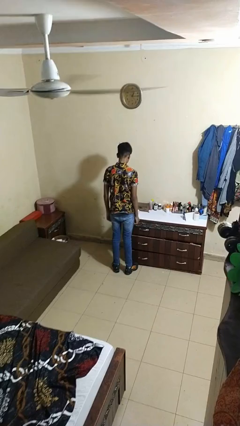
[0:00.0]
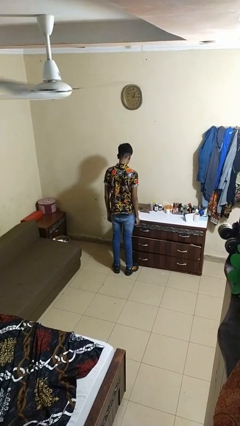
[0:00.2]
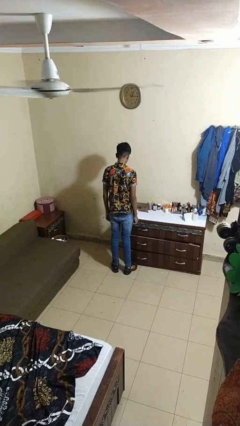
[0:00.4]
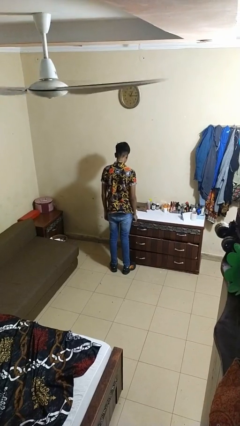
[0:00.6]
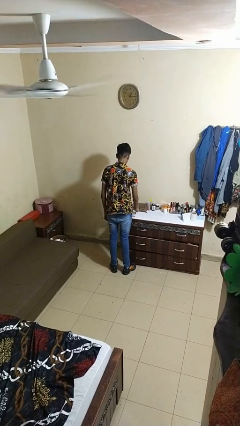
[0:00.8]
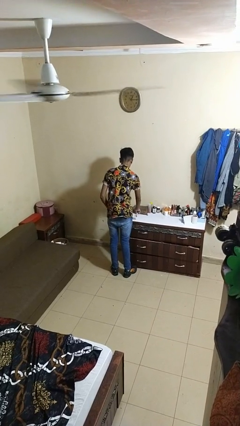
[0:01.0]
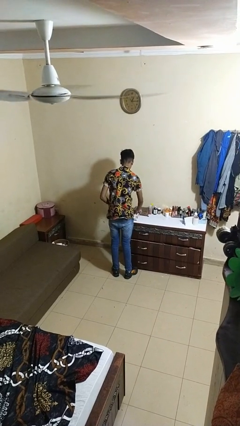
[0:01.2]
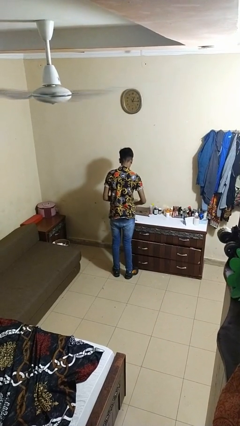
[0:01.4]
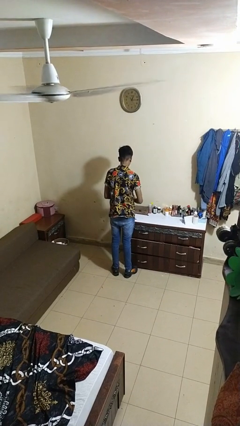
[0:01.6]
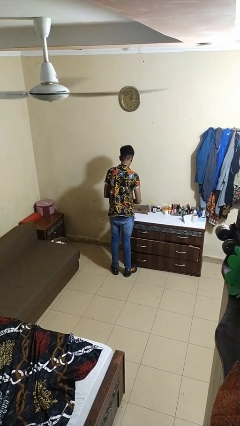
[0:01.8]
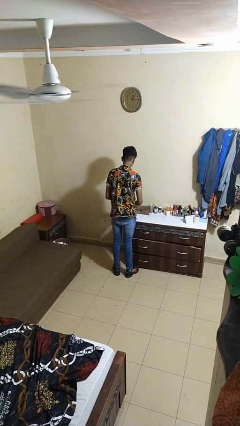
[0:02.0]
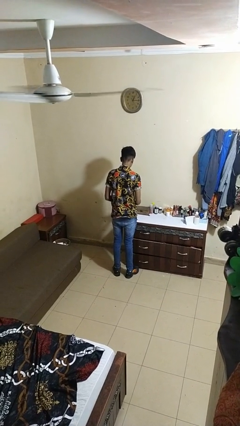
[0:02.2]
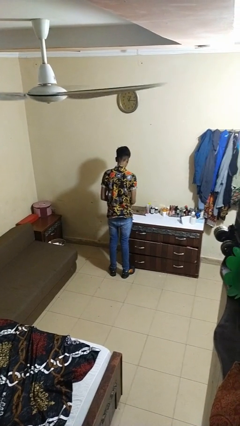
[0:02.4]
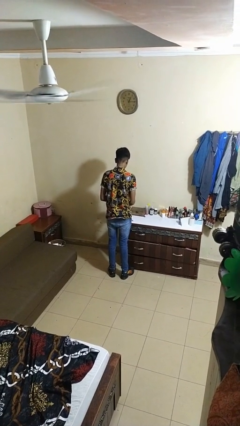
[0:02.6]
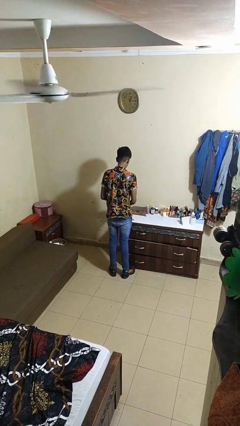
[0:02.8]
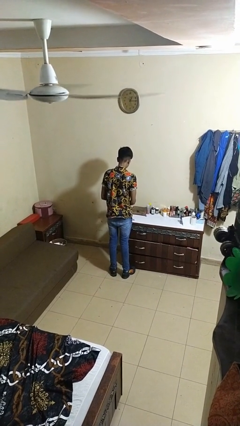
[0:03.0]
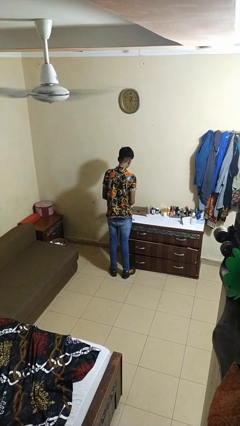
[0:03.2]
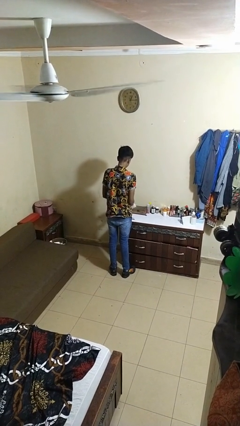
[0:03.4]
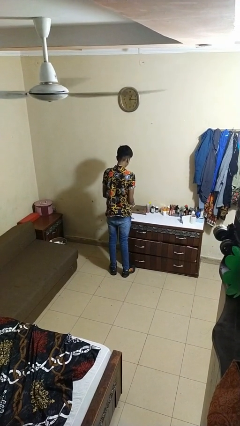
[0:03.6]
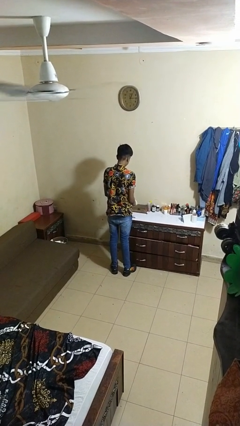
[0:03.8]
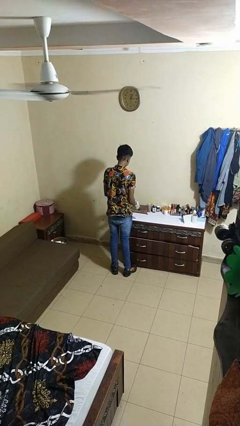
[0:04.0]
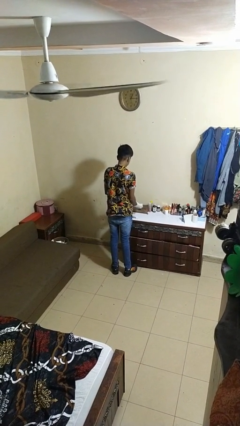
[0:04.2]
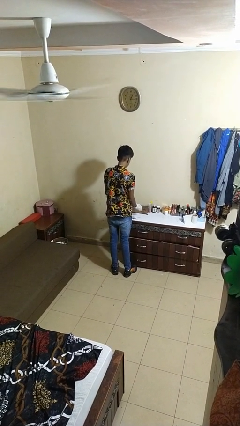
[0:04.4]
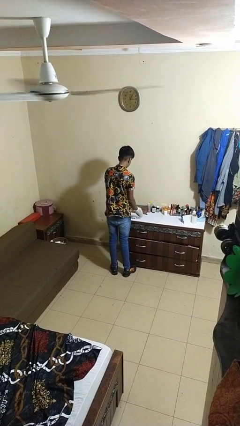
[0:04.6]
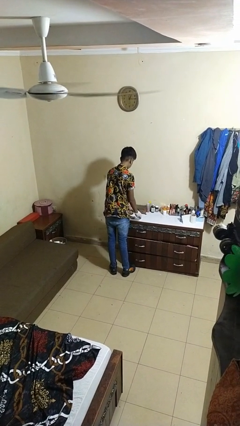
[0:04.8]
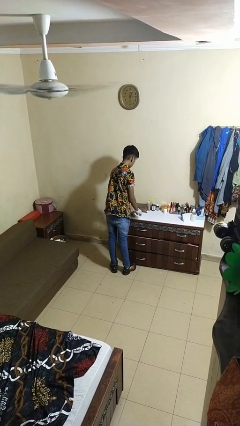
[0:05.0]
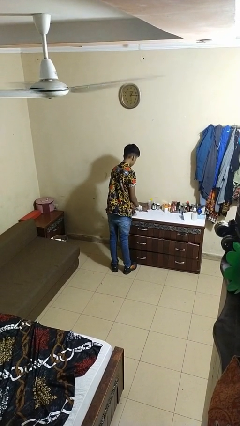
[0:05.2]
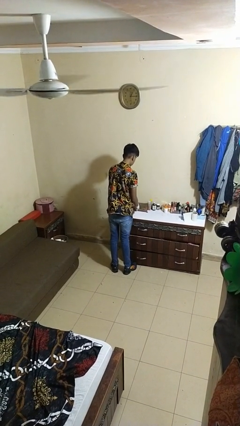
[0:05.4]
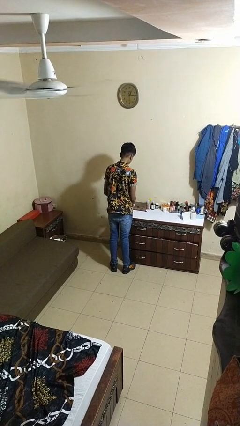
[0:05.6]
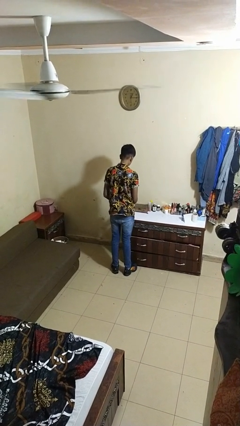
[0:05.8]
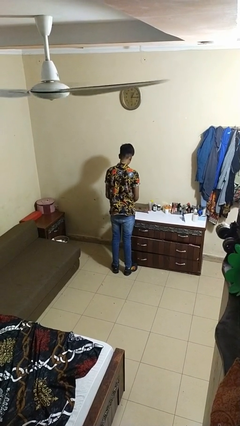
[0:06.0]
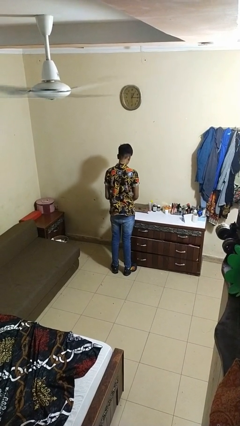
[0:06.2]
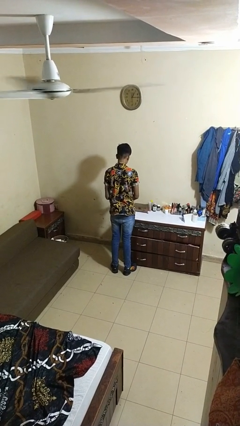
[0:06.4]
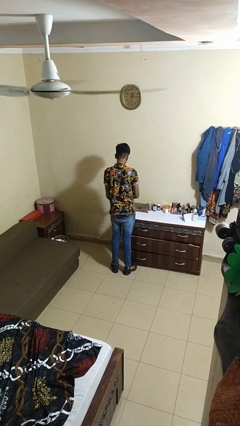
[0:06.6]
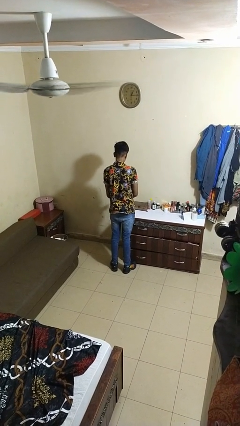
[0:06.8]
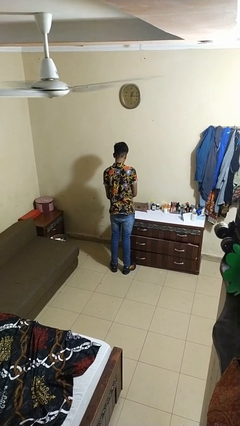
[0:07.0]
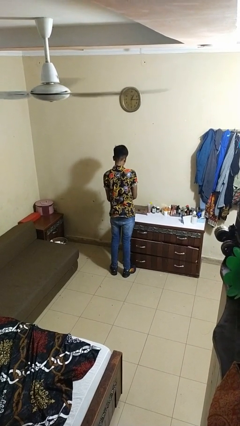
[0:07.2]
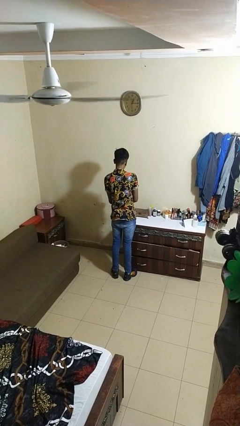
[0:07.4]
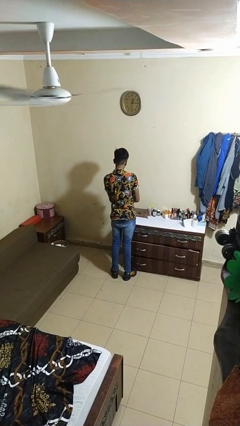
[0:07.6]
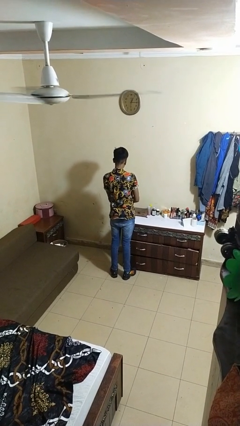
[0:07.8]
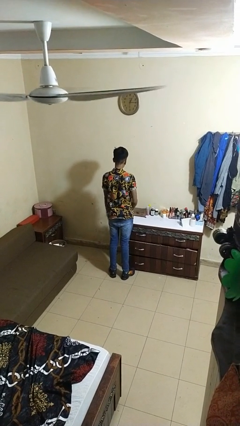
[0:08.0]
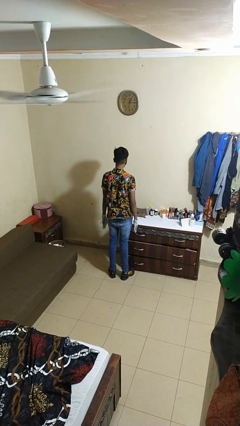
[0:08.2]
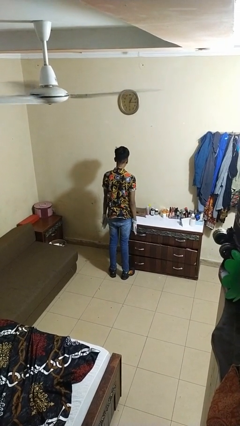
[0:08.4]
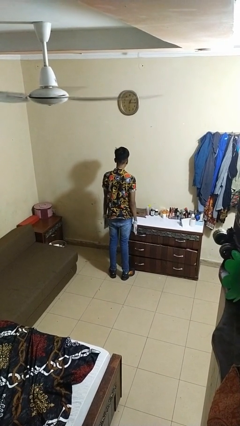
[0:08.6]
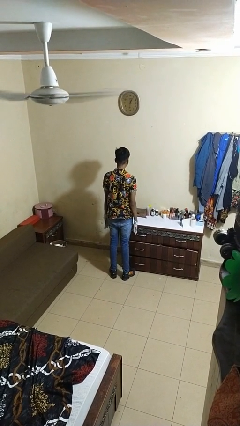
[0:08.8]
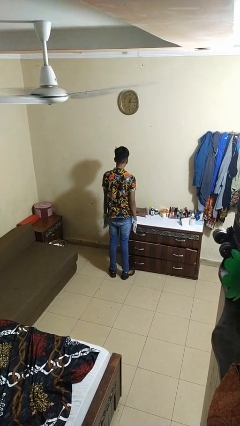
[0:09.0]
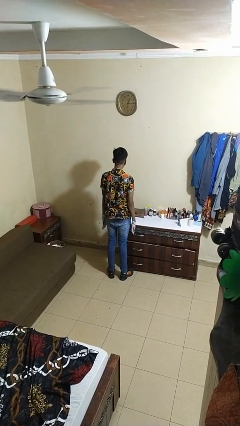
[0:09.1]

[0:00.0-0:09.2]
person puts on gloves

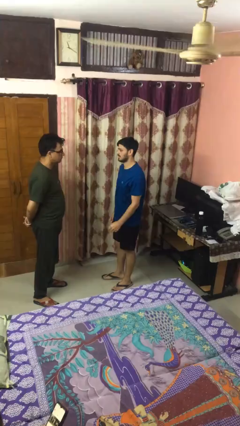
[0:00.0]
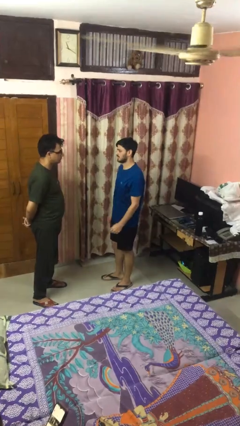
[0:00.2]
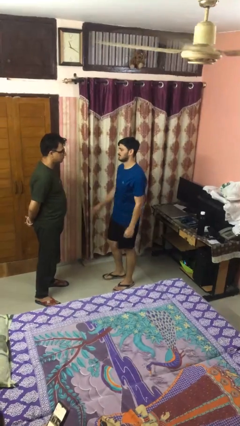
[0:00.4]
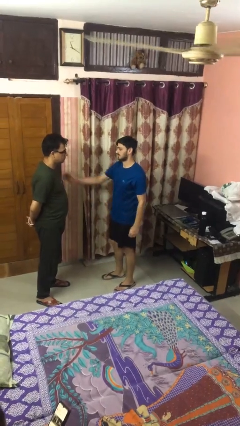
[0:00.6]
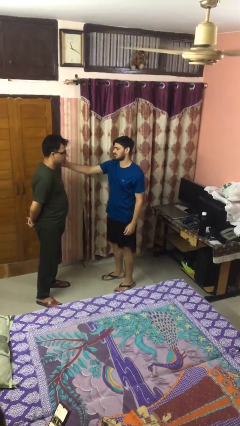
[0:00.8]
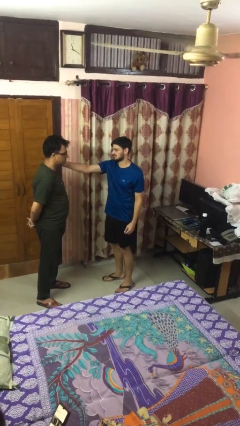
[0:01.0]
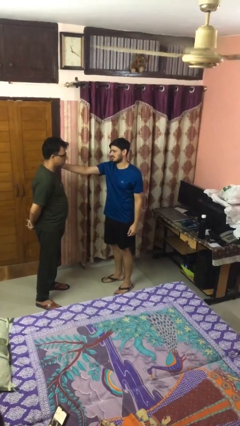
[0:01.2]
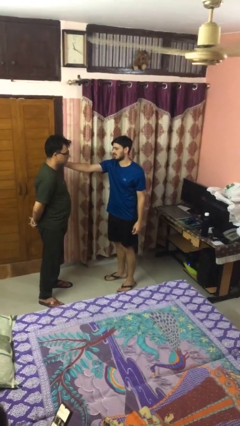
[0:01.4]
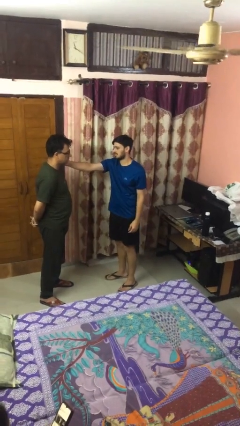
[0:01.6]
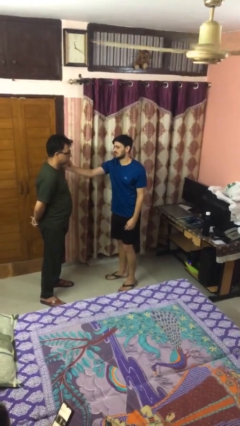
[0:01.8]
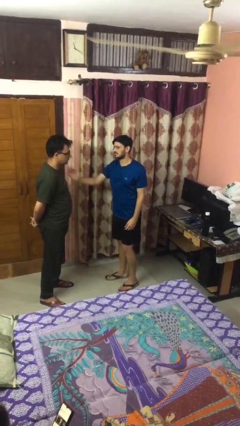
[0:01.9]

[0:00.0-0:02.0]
person touches face of person

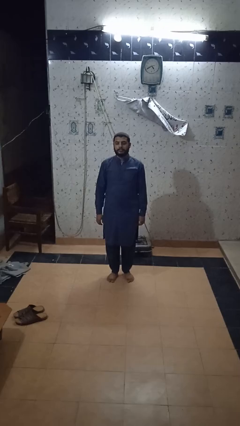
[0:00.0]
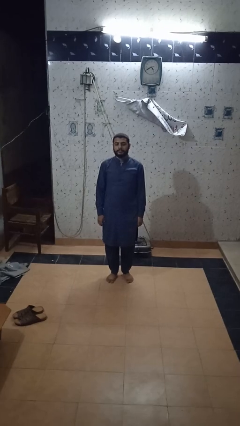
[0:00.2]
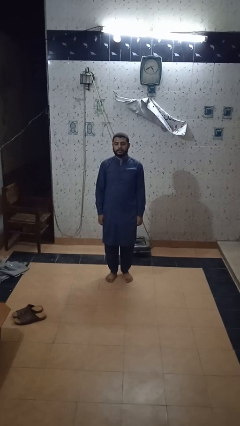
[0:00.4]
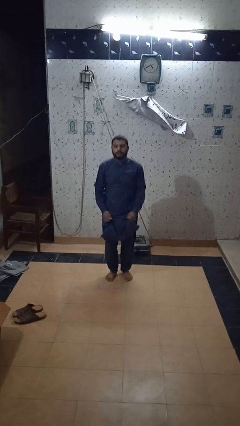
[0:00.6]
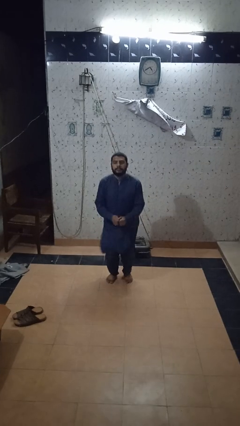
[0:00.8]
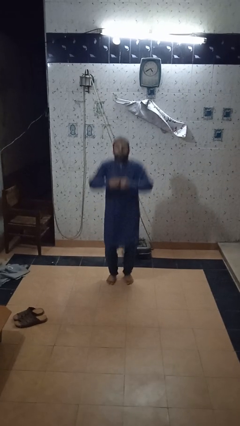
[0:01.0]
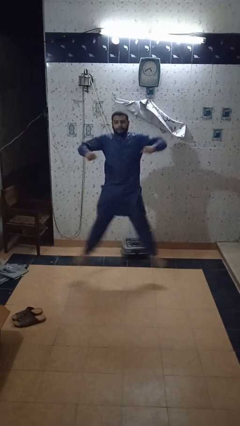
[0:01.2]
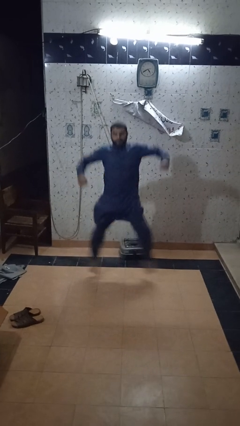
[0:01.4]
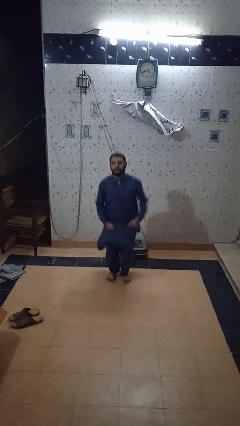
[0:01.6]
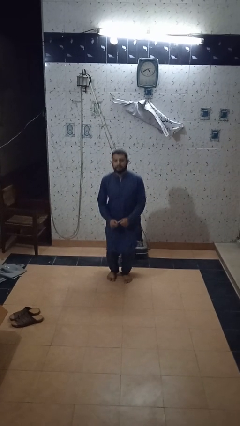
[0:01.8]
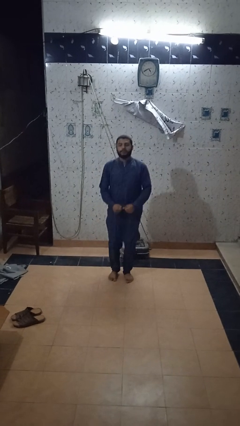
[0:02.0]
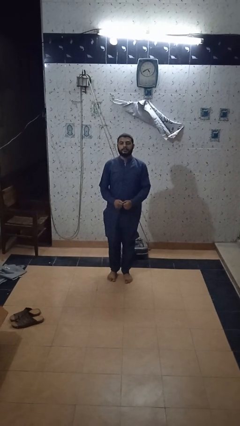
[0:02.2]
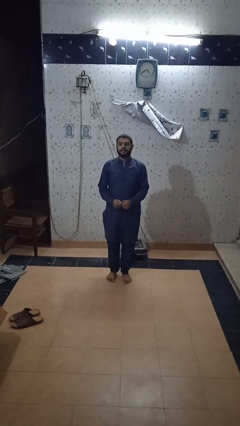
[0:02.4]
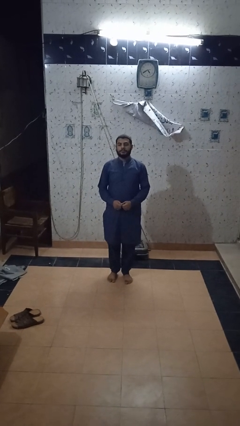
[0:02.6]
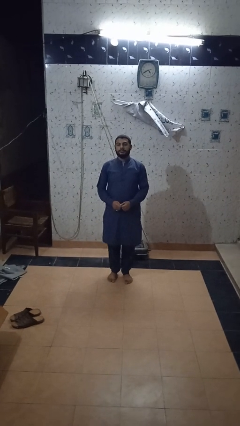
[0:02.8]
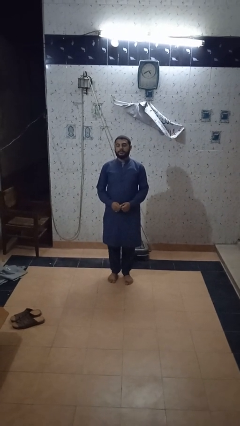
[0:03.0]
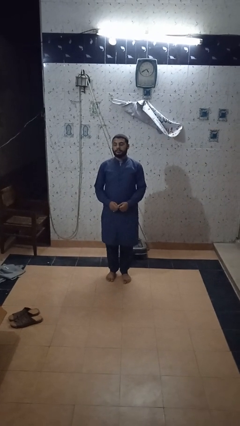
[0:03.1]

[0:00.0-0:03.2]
person exercises with jumping jacks

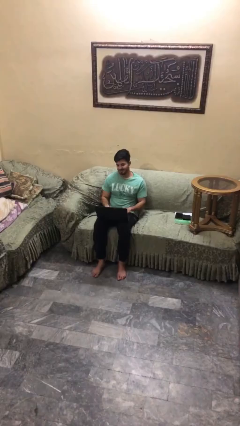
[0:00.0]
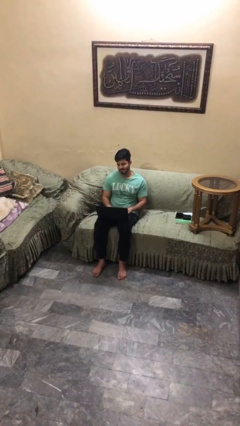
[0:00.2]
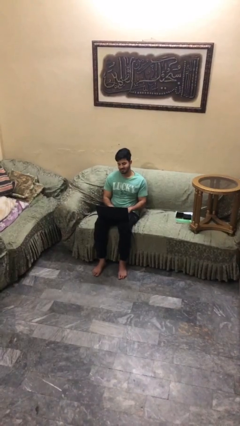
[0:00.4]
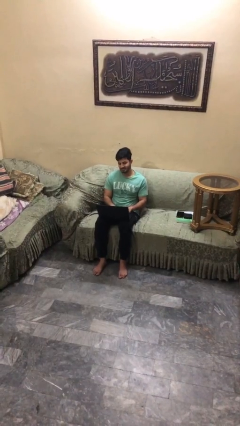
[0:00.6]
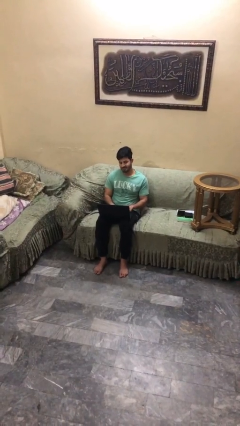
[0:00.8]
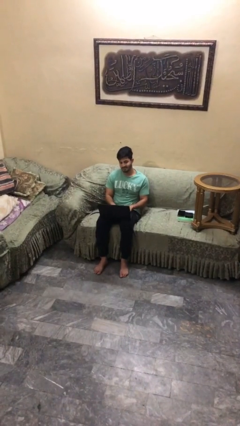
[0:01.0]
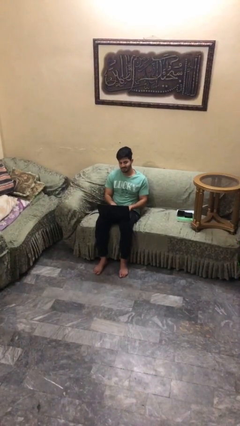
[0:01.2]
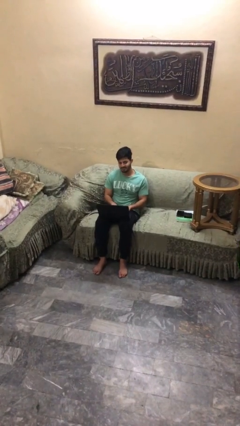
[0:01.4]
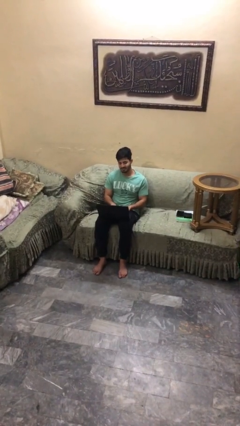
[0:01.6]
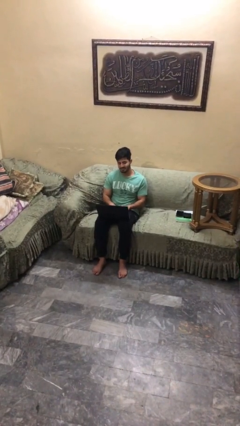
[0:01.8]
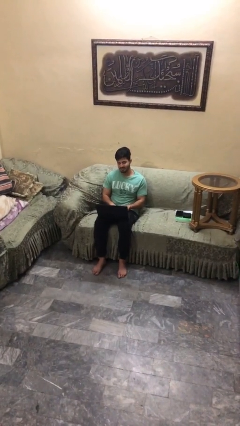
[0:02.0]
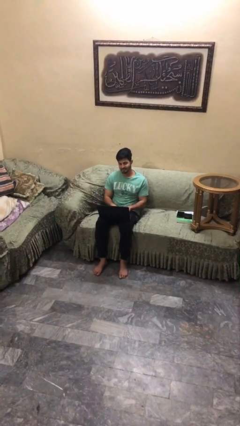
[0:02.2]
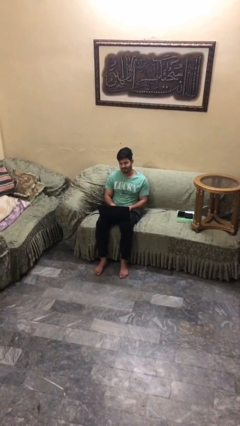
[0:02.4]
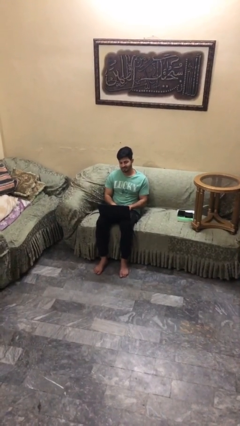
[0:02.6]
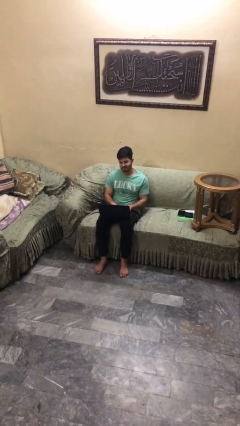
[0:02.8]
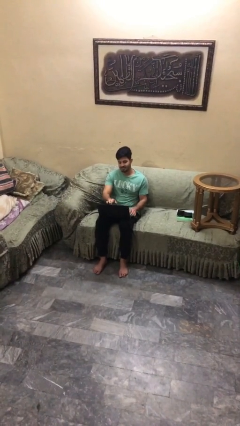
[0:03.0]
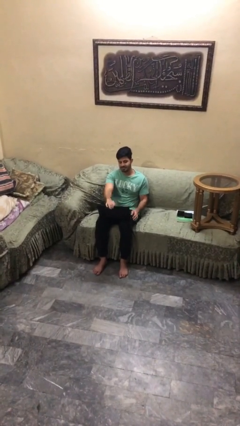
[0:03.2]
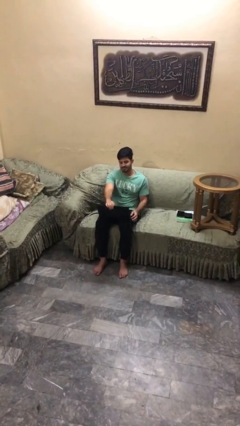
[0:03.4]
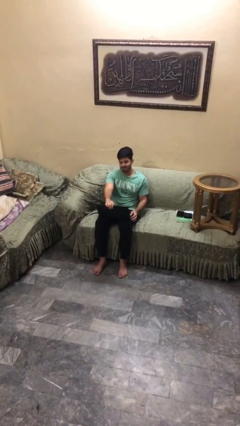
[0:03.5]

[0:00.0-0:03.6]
person interacts with laptop

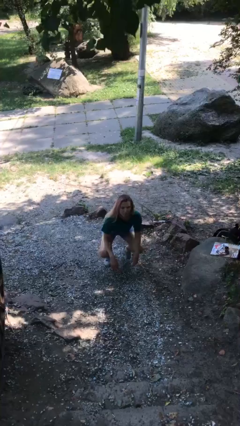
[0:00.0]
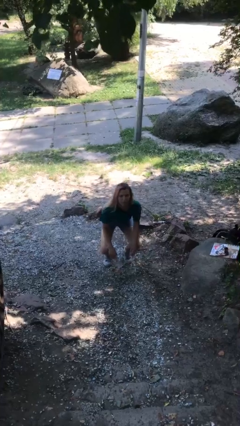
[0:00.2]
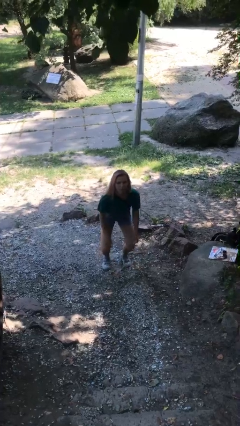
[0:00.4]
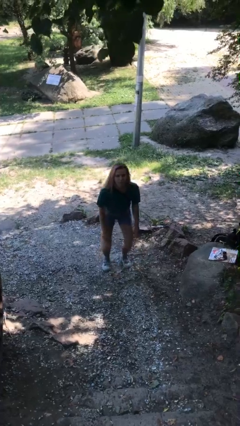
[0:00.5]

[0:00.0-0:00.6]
person stands up
